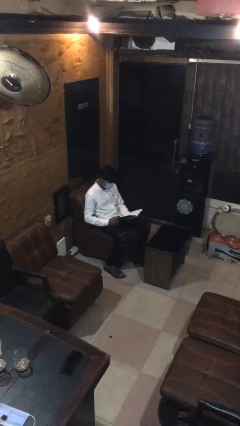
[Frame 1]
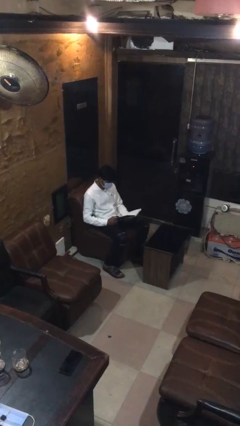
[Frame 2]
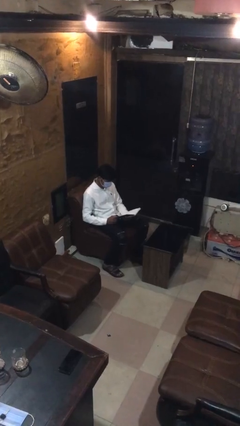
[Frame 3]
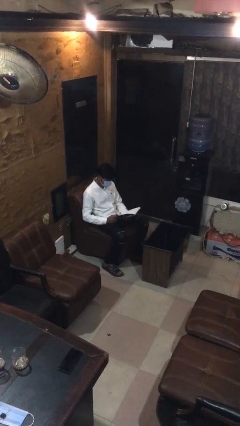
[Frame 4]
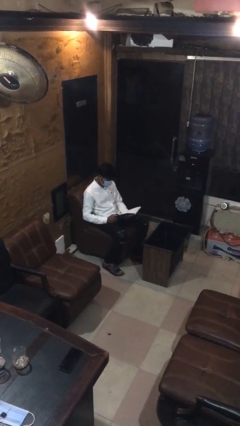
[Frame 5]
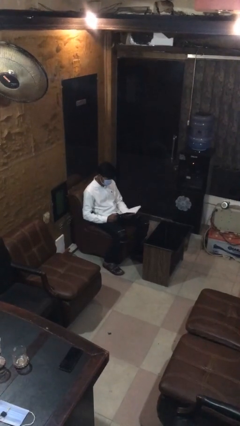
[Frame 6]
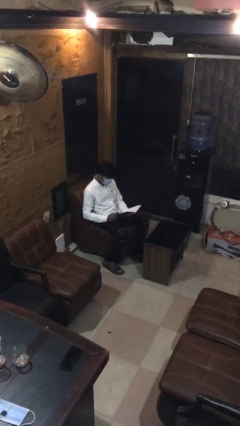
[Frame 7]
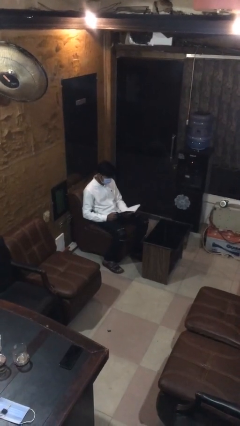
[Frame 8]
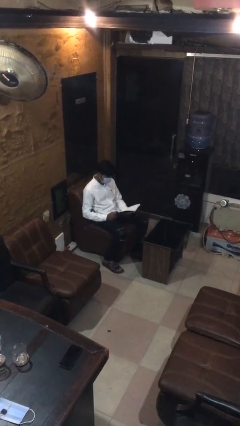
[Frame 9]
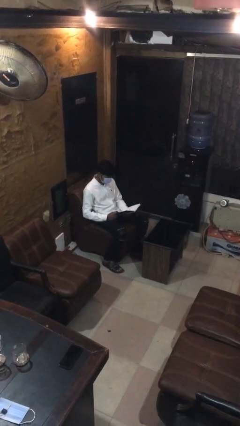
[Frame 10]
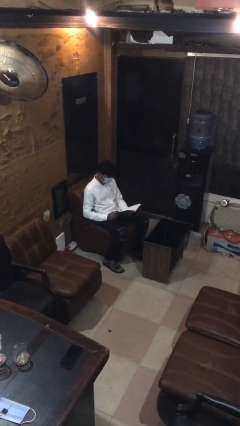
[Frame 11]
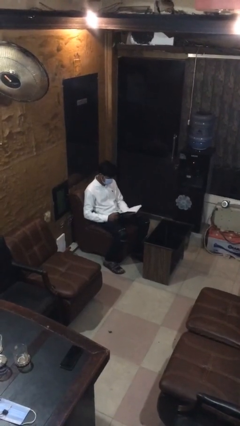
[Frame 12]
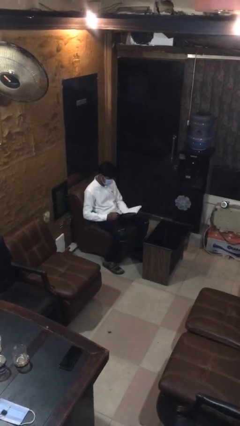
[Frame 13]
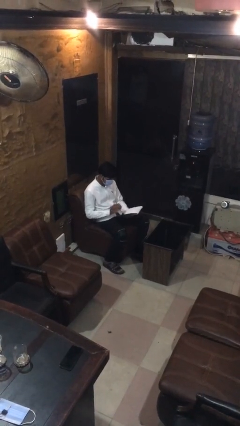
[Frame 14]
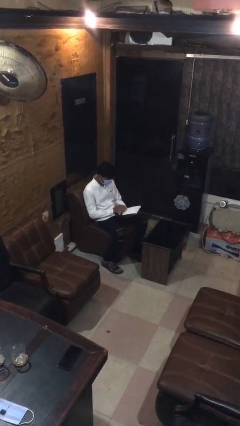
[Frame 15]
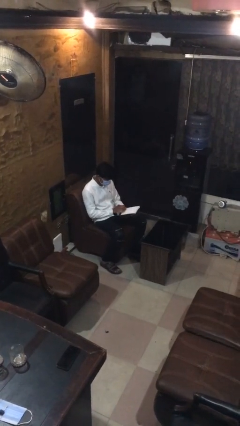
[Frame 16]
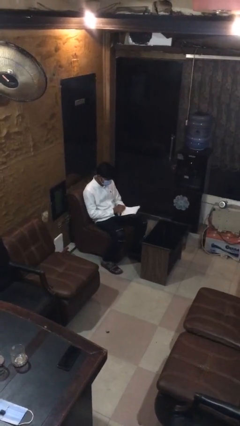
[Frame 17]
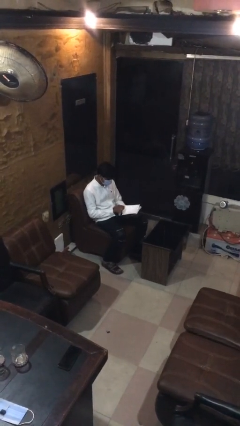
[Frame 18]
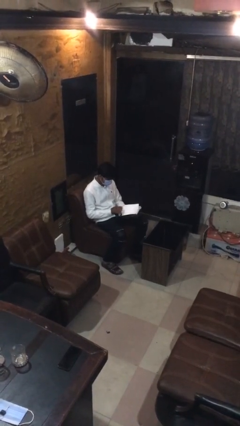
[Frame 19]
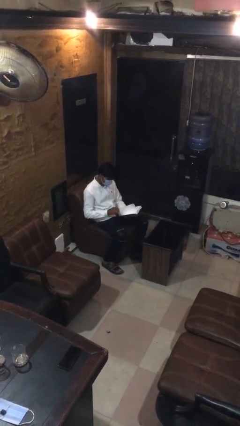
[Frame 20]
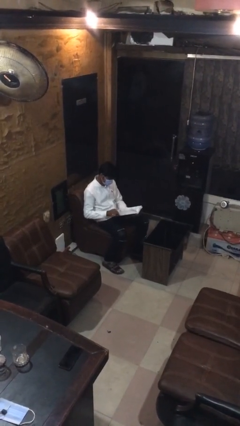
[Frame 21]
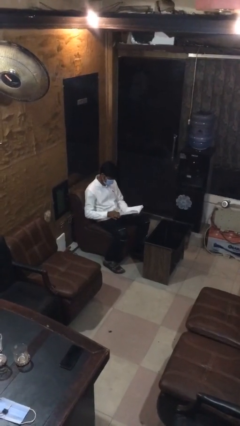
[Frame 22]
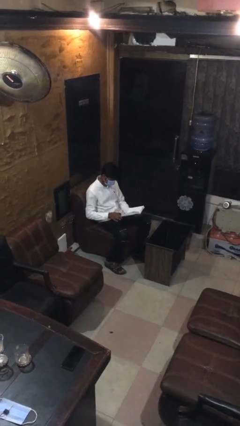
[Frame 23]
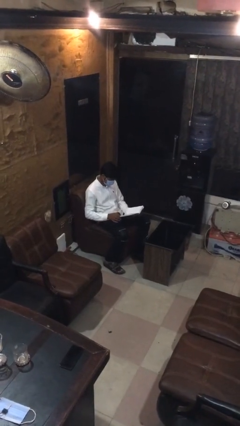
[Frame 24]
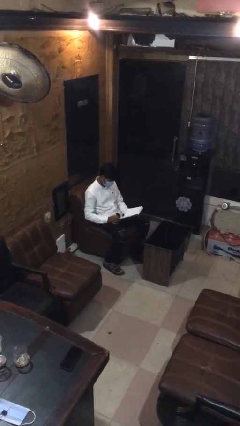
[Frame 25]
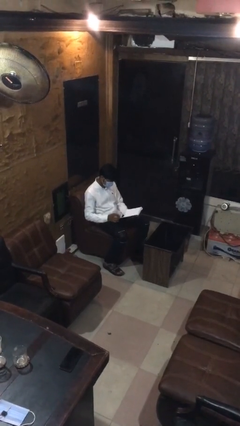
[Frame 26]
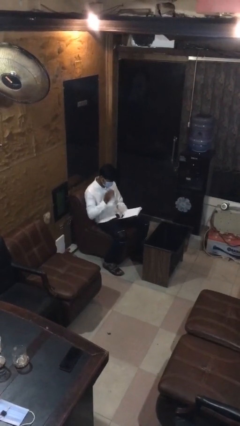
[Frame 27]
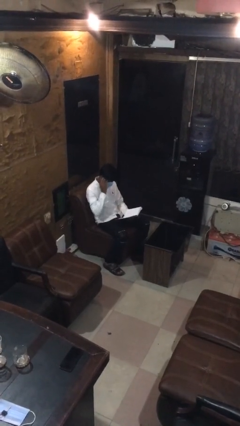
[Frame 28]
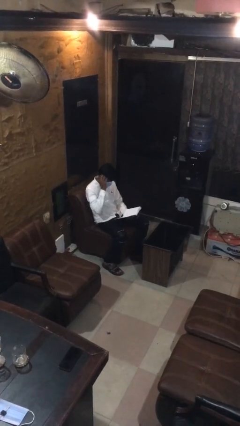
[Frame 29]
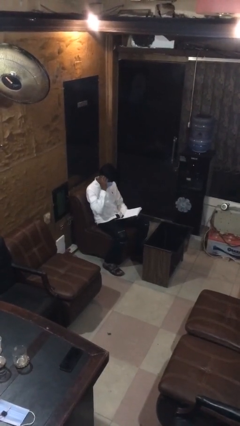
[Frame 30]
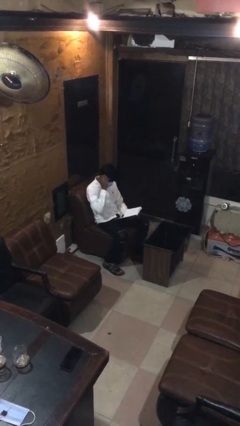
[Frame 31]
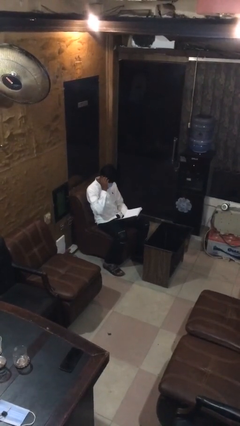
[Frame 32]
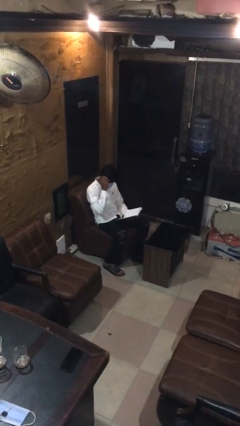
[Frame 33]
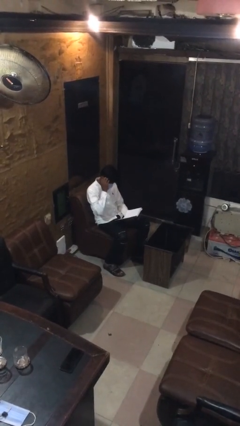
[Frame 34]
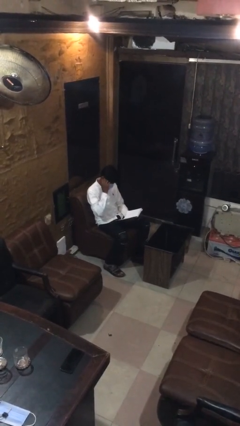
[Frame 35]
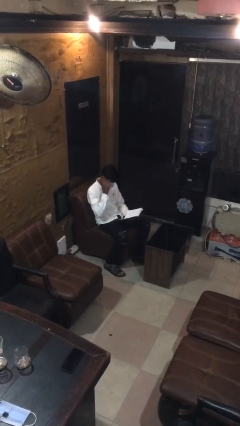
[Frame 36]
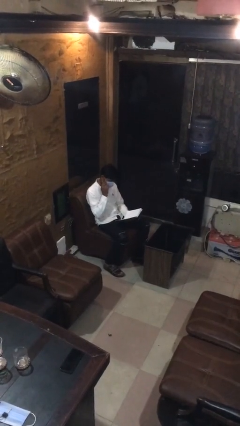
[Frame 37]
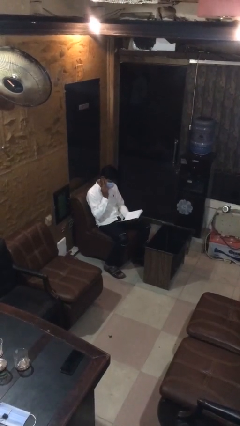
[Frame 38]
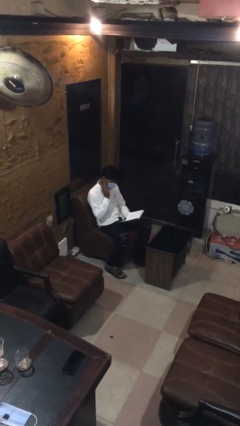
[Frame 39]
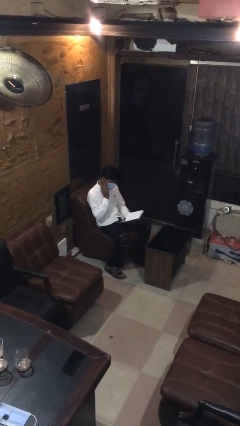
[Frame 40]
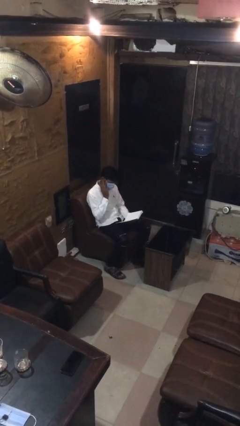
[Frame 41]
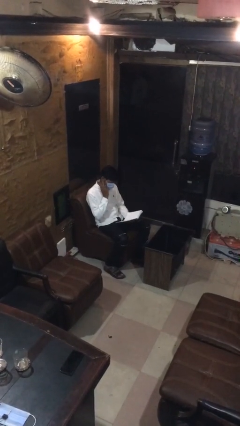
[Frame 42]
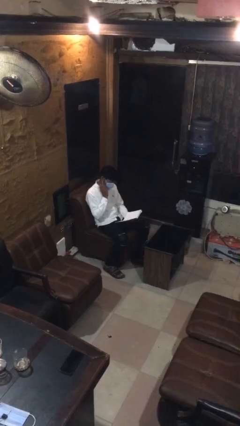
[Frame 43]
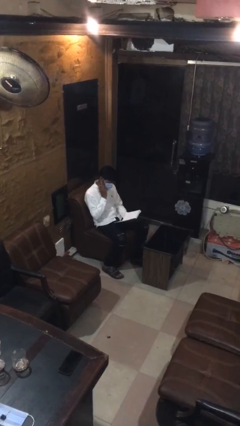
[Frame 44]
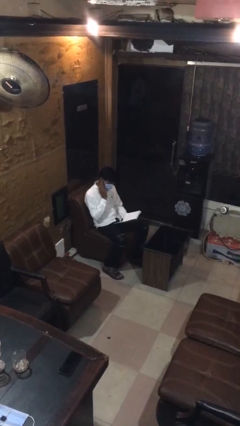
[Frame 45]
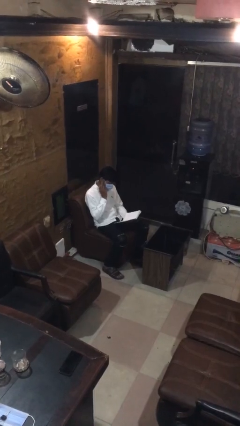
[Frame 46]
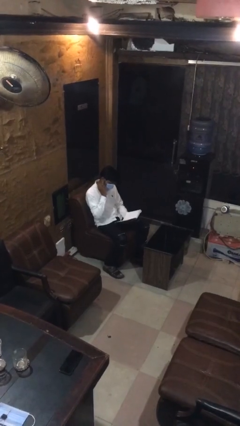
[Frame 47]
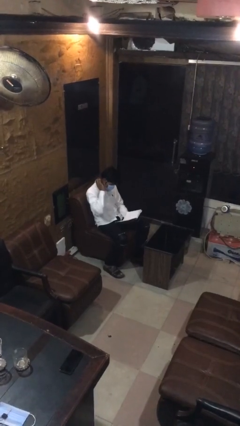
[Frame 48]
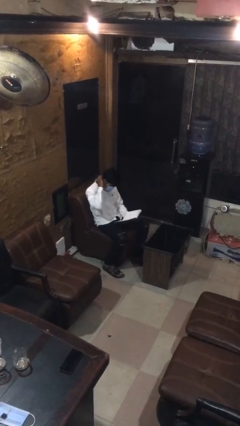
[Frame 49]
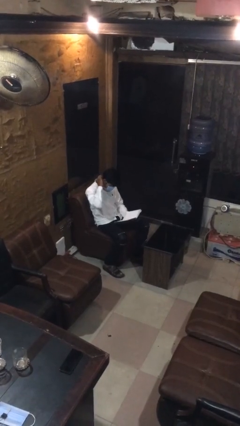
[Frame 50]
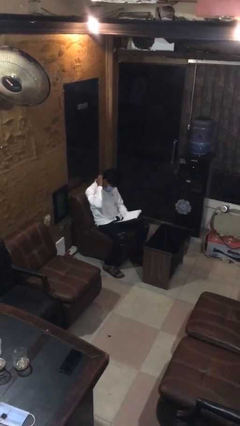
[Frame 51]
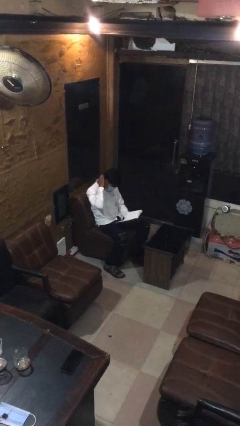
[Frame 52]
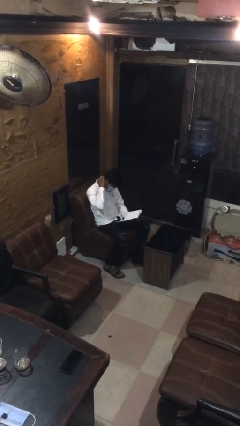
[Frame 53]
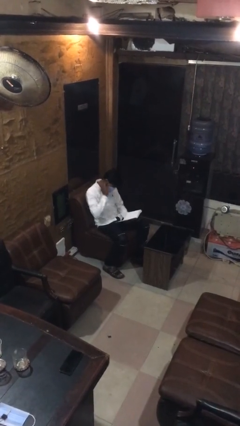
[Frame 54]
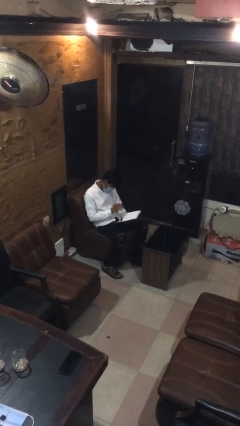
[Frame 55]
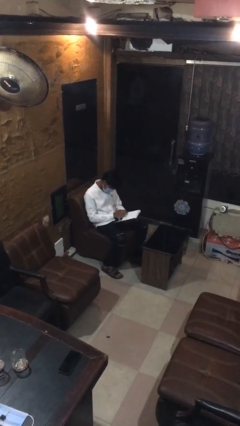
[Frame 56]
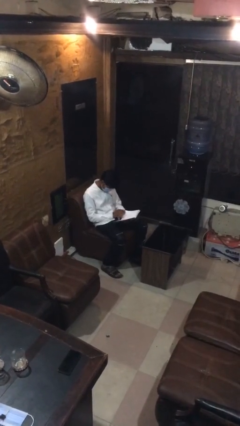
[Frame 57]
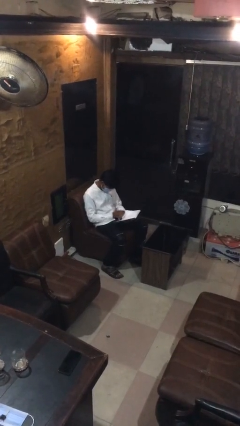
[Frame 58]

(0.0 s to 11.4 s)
person reads document

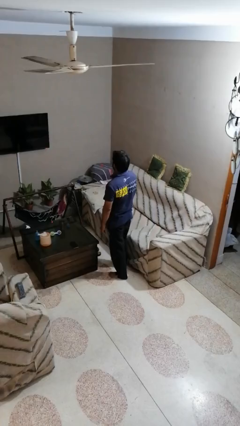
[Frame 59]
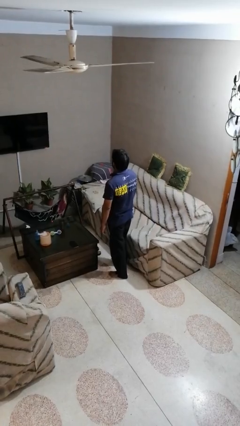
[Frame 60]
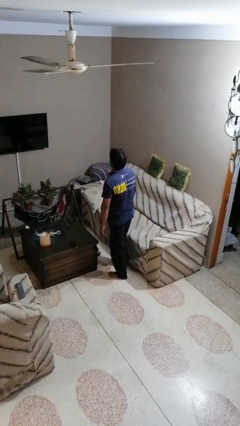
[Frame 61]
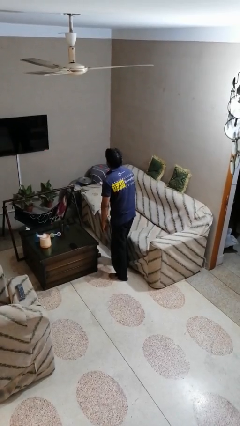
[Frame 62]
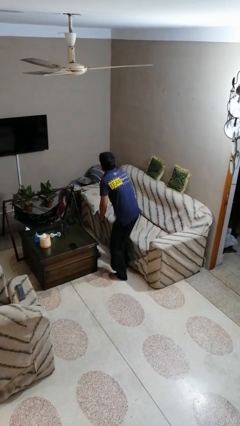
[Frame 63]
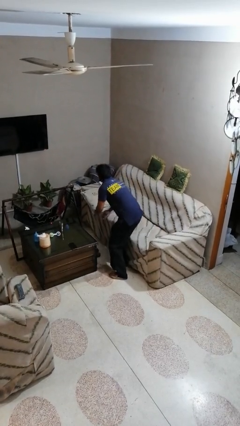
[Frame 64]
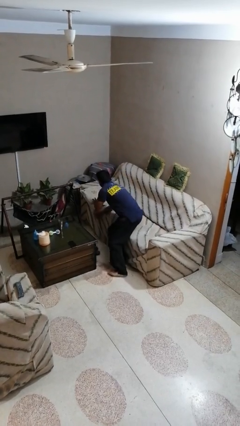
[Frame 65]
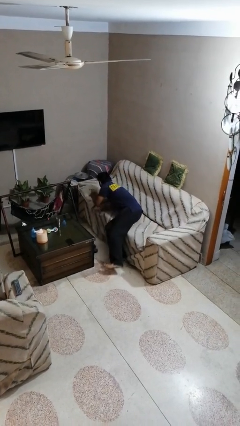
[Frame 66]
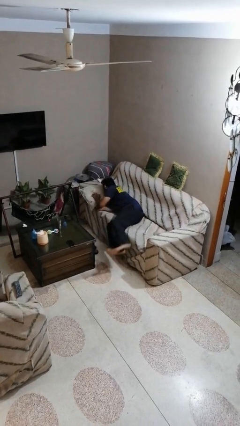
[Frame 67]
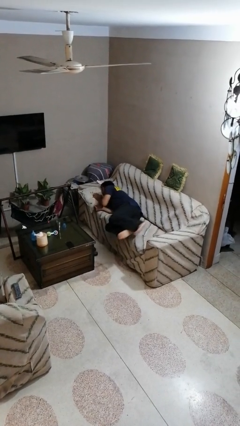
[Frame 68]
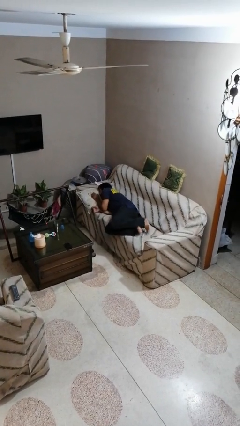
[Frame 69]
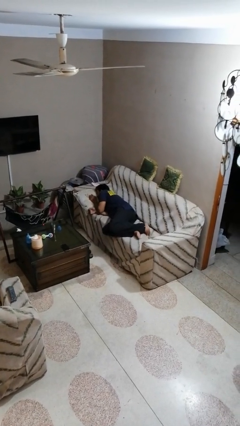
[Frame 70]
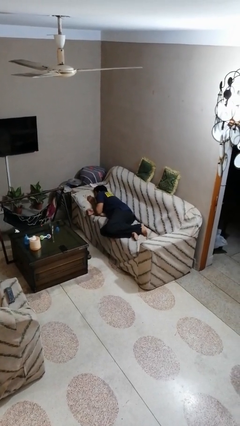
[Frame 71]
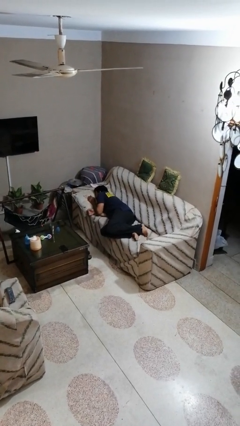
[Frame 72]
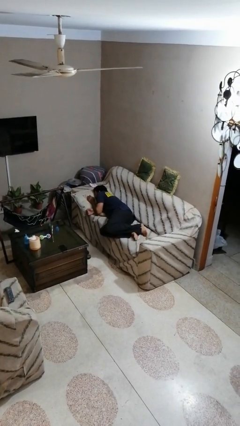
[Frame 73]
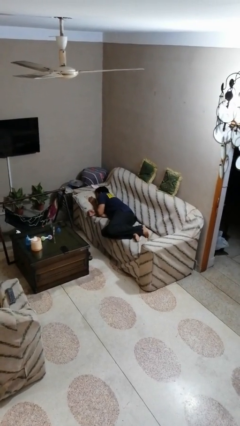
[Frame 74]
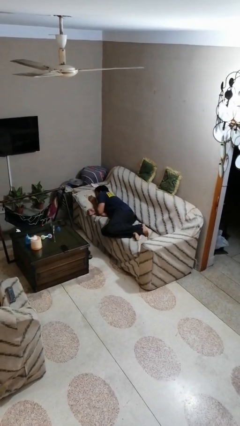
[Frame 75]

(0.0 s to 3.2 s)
person lies down on couch

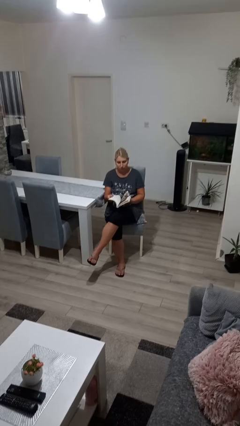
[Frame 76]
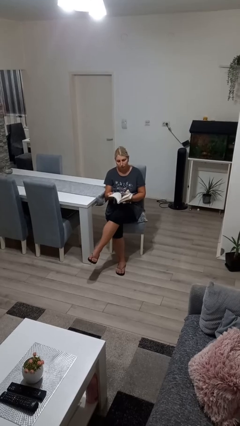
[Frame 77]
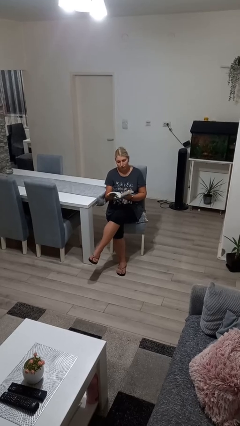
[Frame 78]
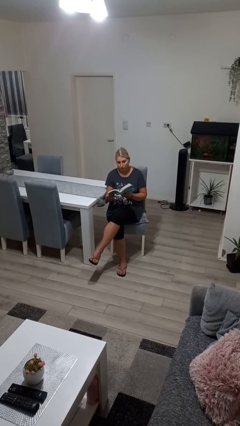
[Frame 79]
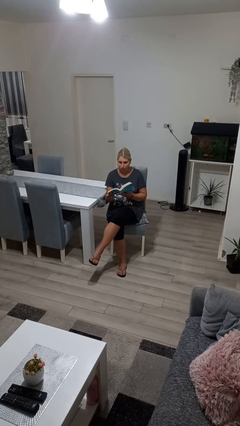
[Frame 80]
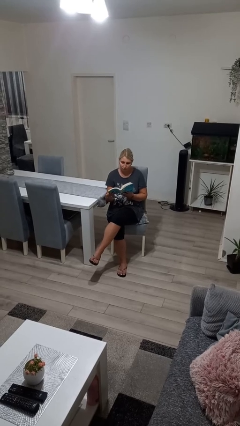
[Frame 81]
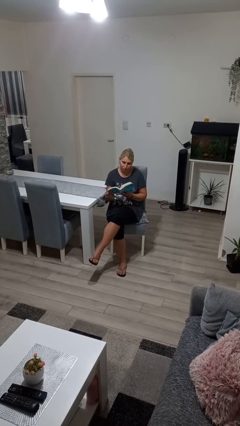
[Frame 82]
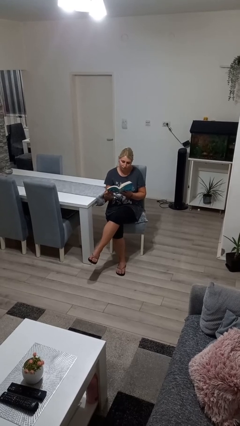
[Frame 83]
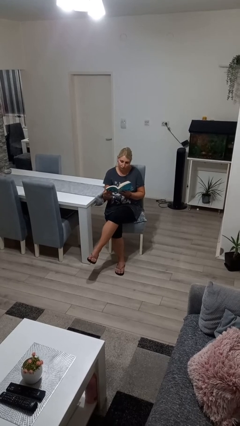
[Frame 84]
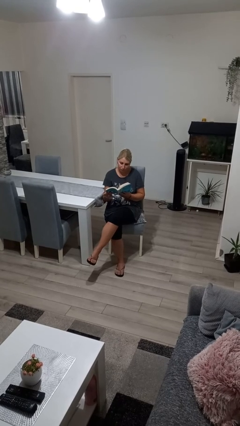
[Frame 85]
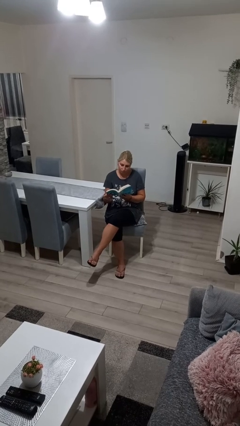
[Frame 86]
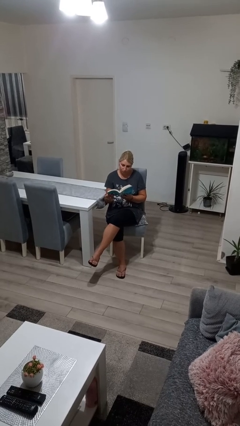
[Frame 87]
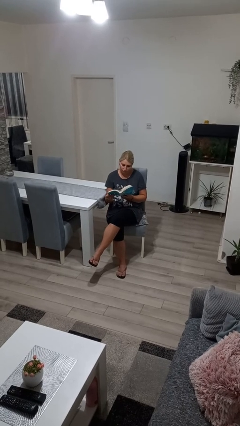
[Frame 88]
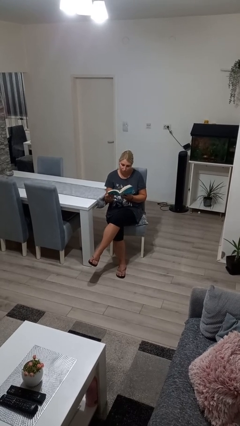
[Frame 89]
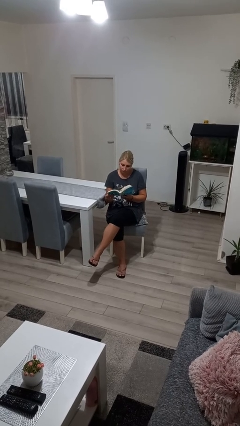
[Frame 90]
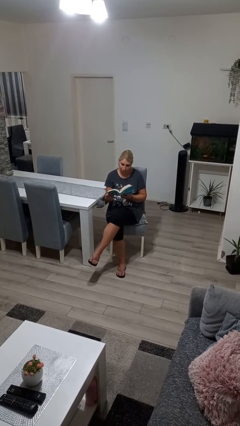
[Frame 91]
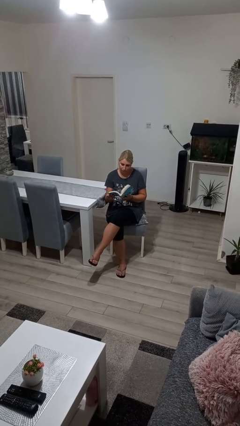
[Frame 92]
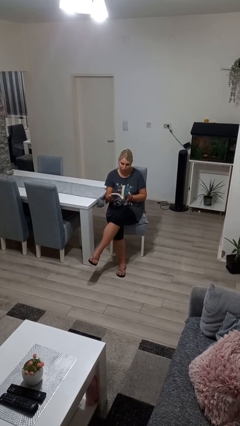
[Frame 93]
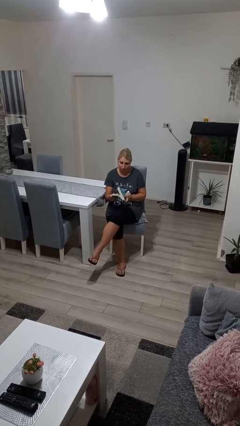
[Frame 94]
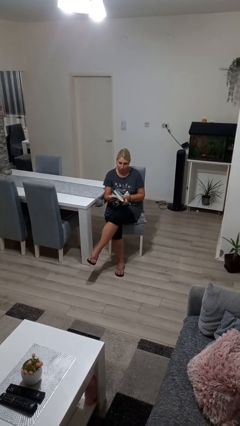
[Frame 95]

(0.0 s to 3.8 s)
person reads book
